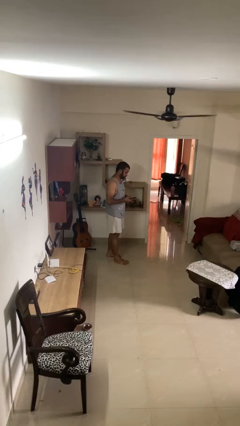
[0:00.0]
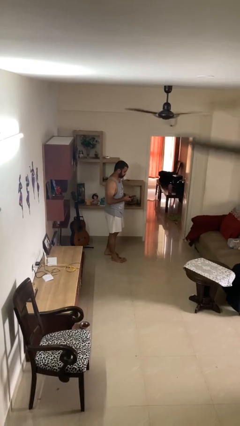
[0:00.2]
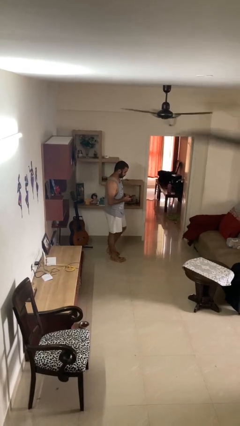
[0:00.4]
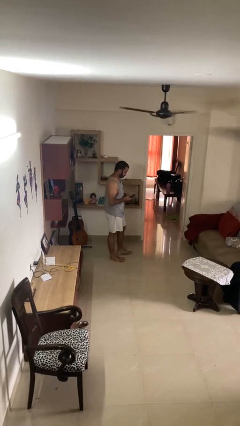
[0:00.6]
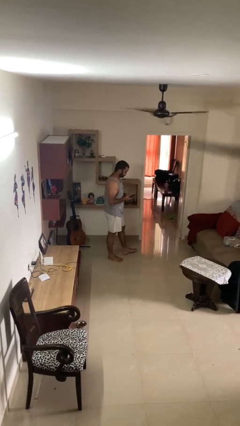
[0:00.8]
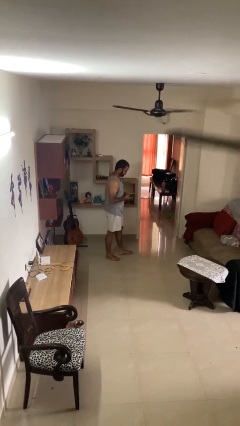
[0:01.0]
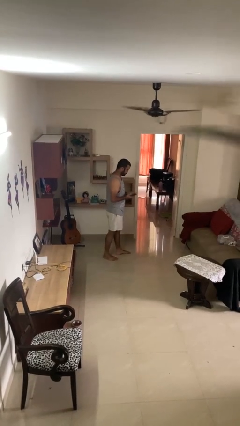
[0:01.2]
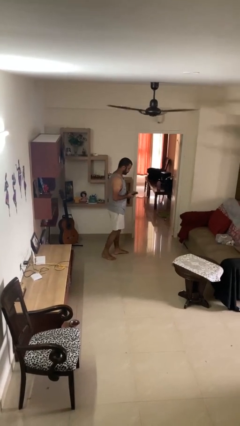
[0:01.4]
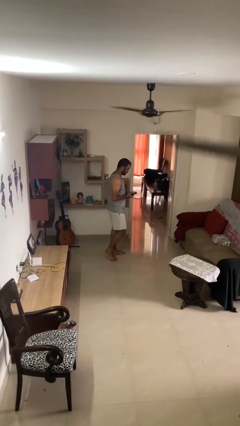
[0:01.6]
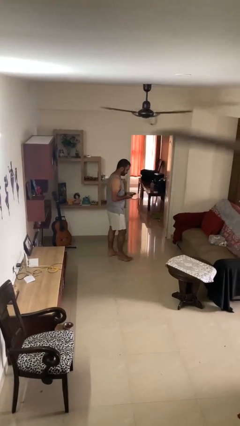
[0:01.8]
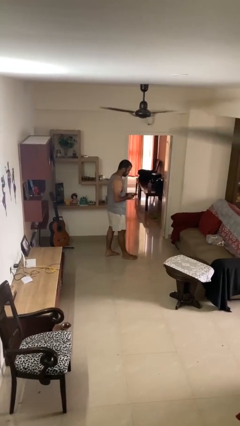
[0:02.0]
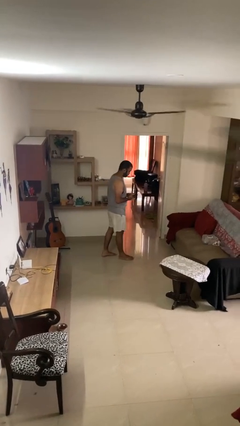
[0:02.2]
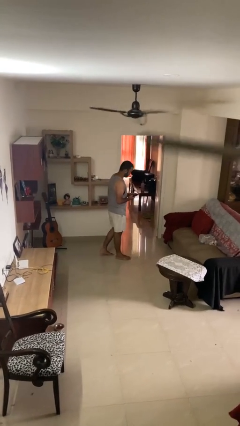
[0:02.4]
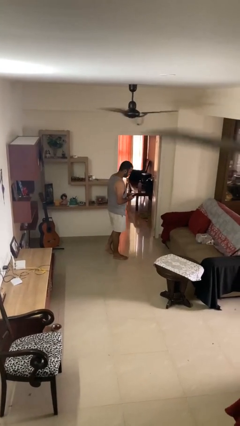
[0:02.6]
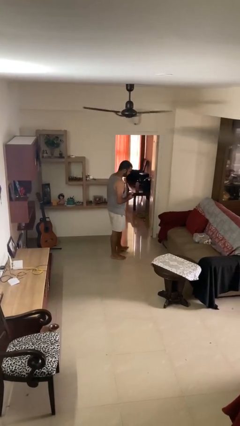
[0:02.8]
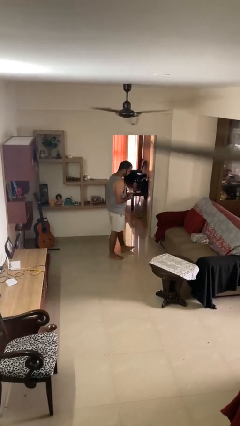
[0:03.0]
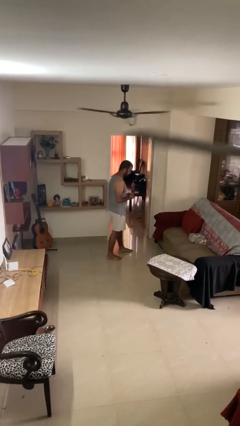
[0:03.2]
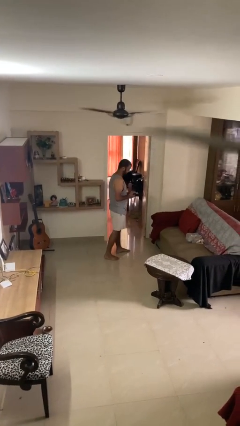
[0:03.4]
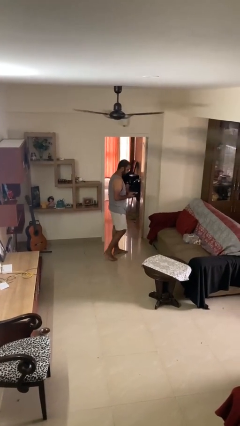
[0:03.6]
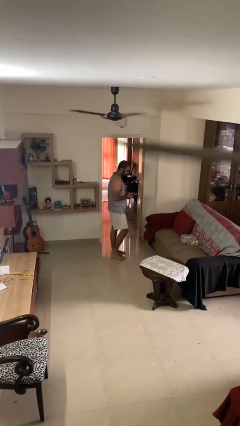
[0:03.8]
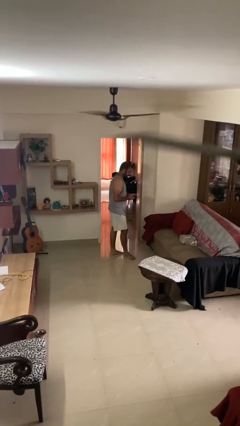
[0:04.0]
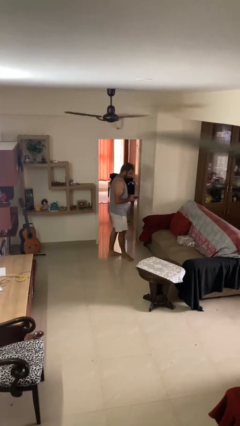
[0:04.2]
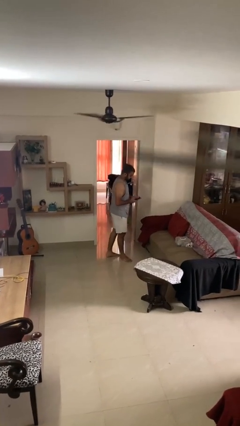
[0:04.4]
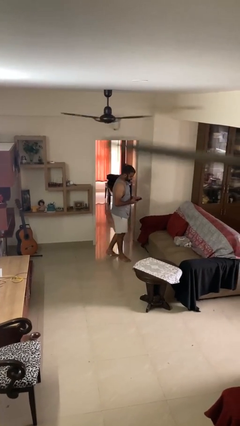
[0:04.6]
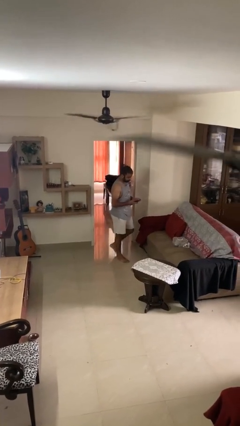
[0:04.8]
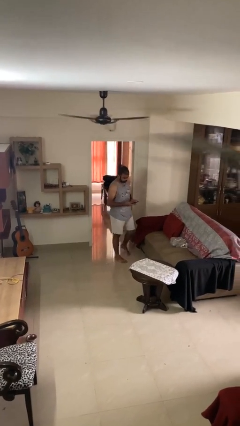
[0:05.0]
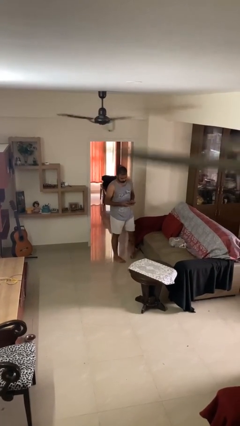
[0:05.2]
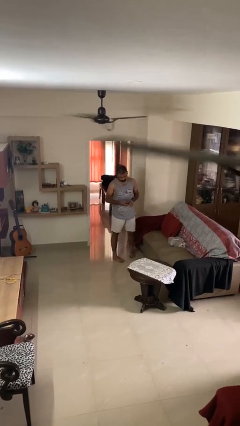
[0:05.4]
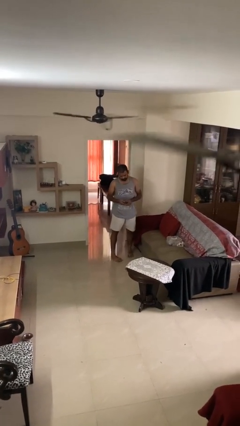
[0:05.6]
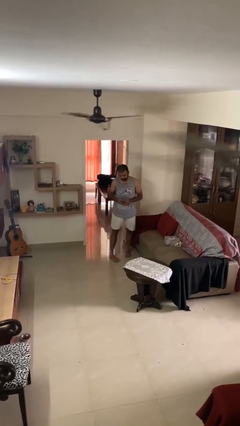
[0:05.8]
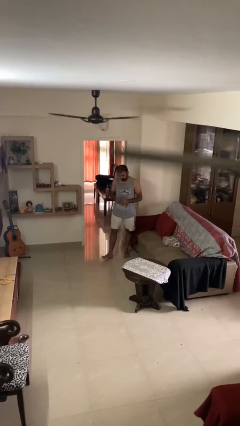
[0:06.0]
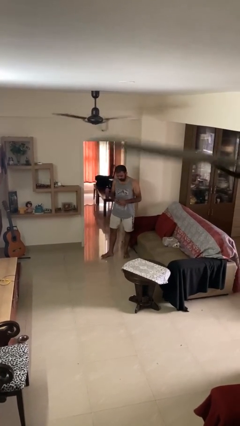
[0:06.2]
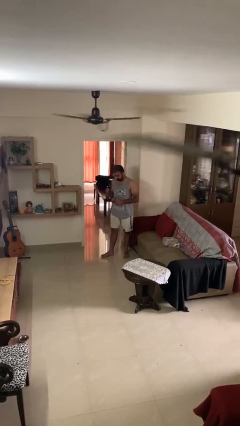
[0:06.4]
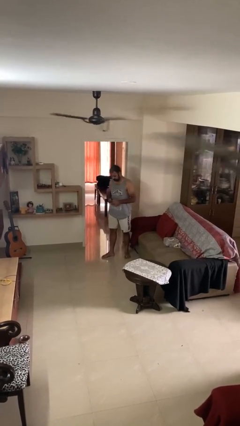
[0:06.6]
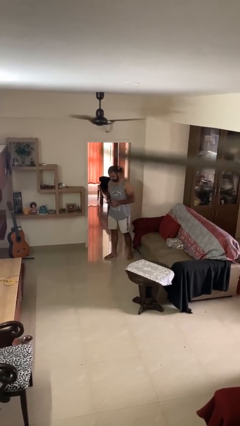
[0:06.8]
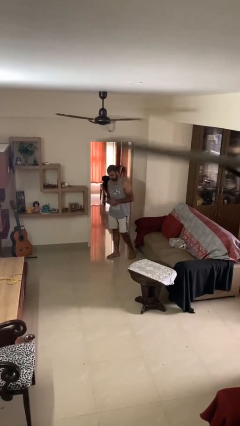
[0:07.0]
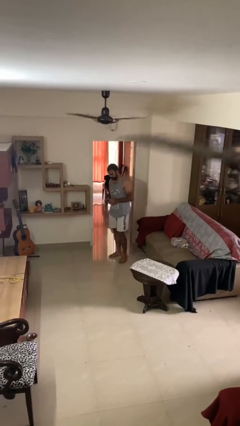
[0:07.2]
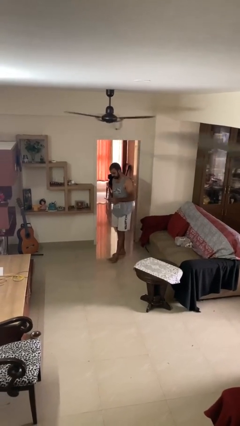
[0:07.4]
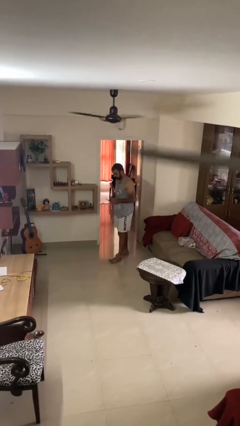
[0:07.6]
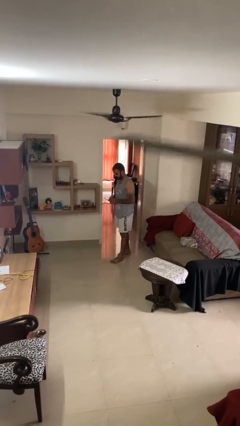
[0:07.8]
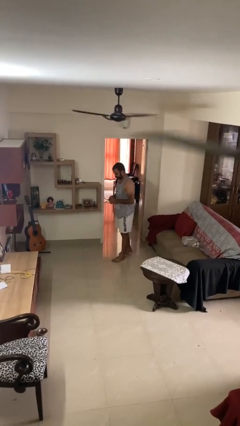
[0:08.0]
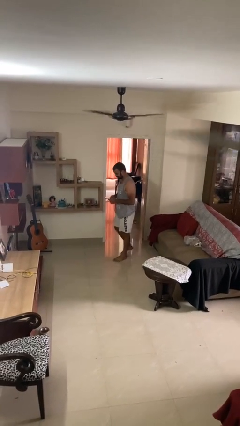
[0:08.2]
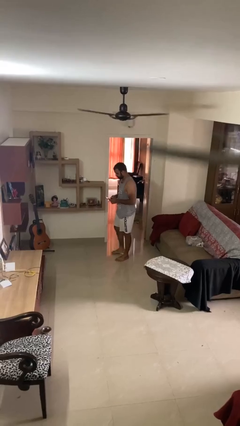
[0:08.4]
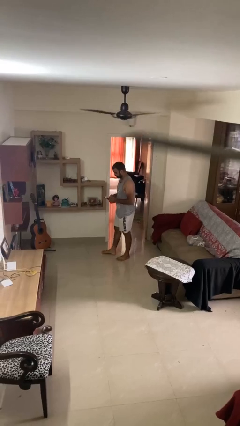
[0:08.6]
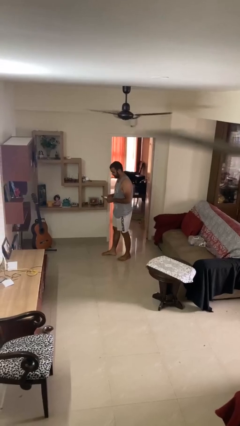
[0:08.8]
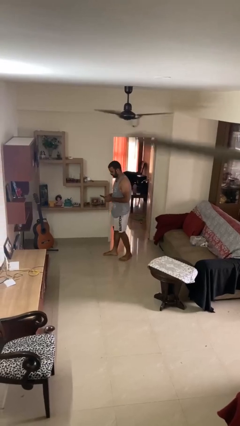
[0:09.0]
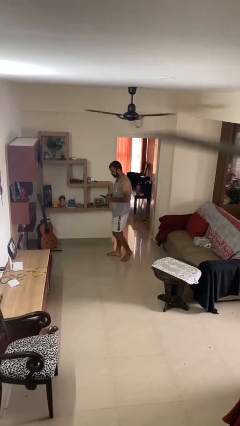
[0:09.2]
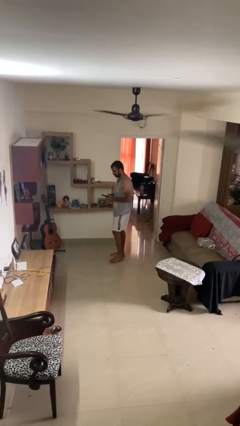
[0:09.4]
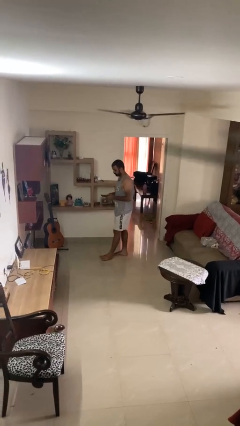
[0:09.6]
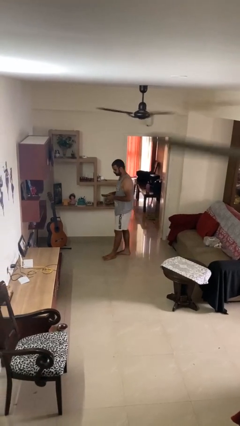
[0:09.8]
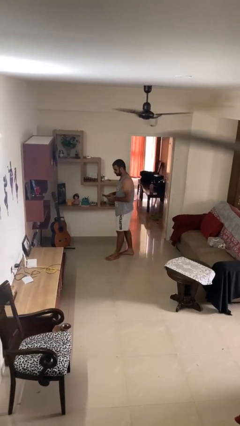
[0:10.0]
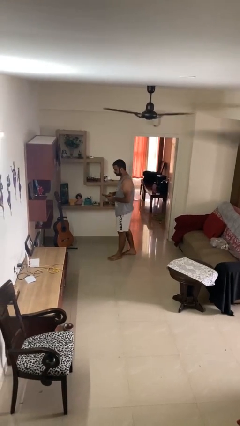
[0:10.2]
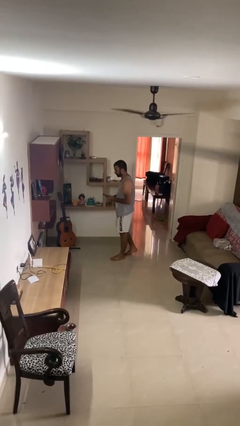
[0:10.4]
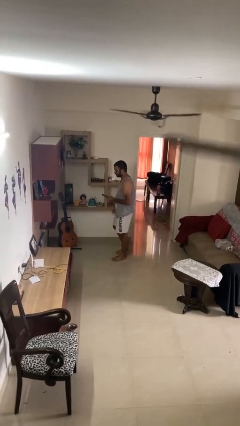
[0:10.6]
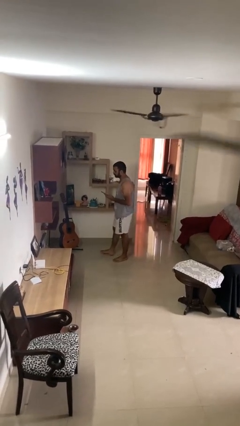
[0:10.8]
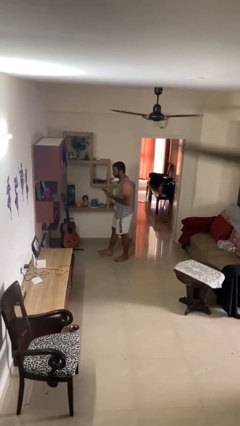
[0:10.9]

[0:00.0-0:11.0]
person texts on phone

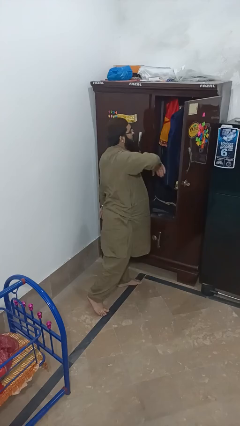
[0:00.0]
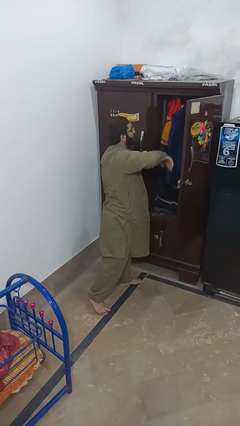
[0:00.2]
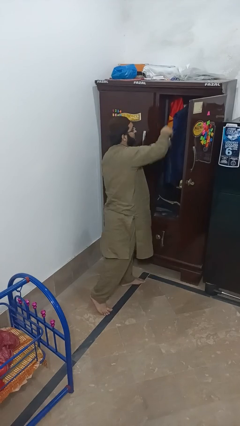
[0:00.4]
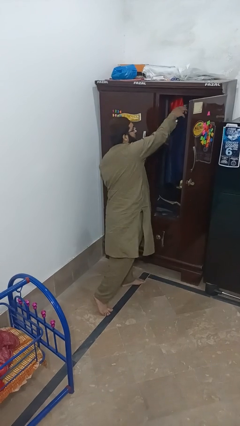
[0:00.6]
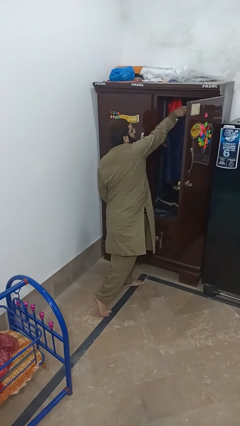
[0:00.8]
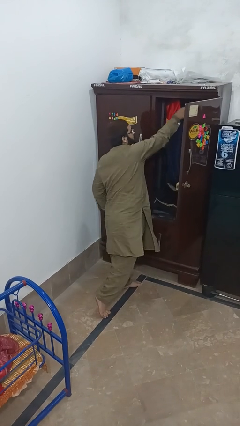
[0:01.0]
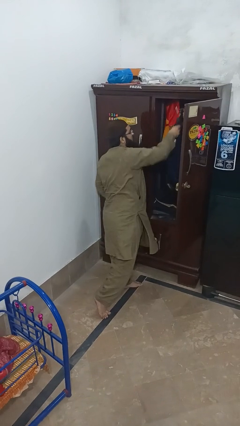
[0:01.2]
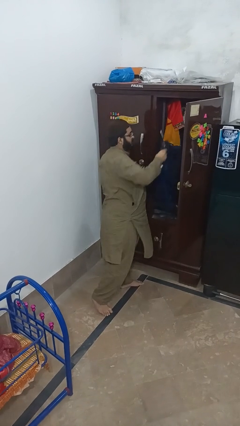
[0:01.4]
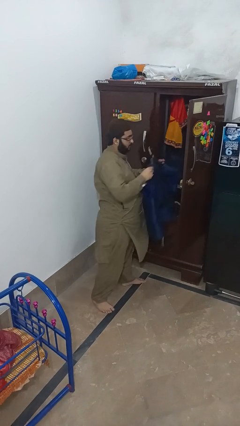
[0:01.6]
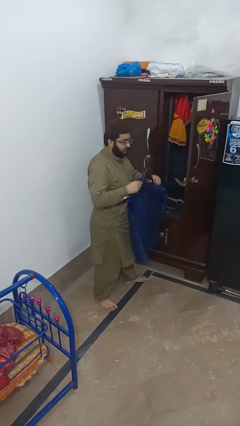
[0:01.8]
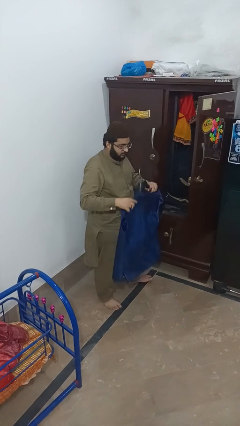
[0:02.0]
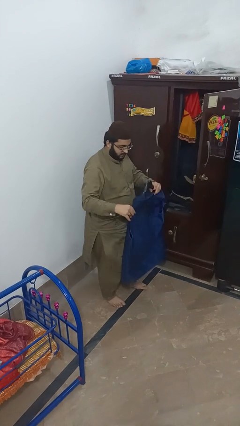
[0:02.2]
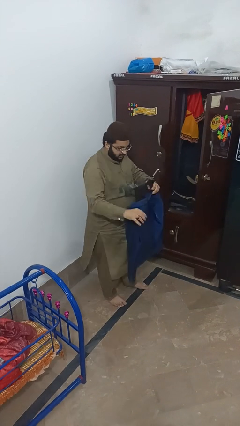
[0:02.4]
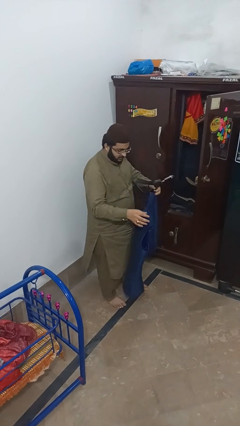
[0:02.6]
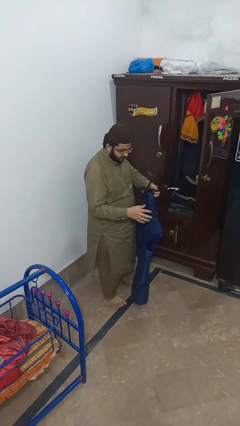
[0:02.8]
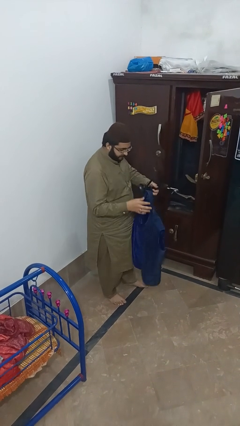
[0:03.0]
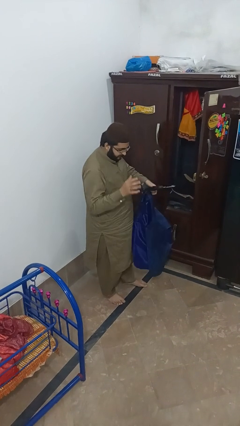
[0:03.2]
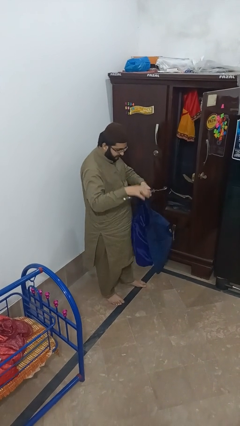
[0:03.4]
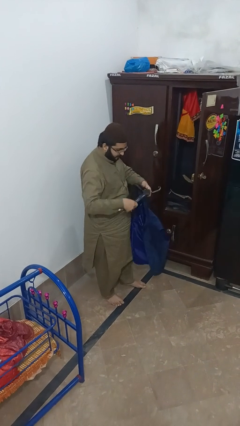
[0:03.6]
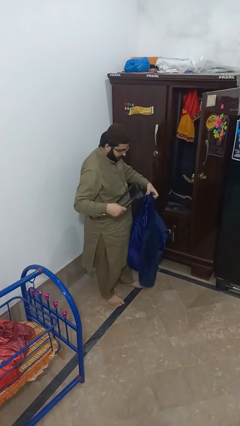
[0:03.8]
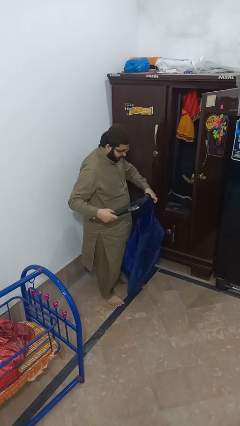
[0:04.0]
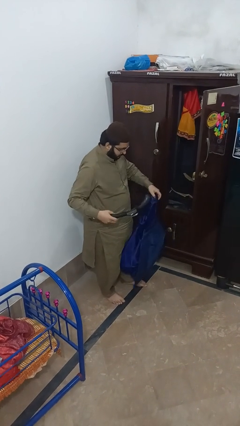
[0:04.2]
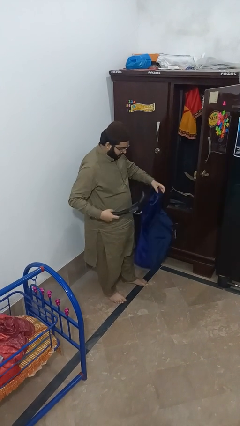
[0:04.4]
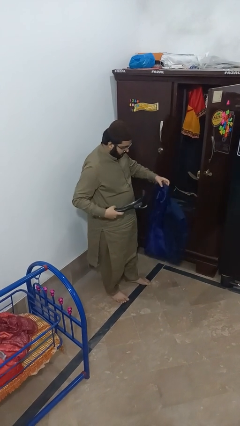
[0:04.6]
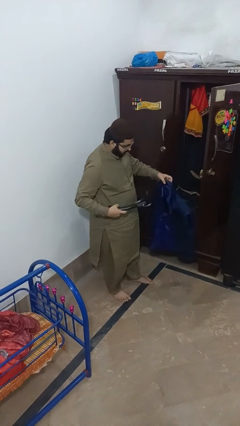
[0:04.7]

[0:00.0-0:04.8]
person takes clothes from closet

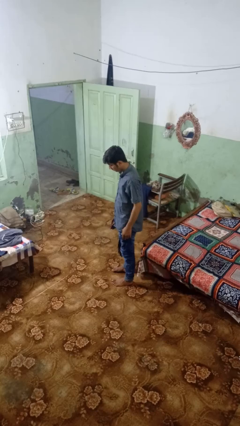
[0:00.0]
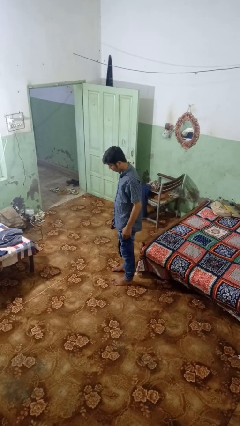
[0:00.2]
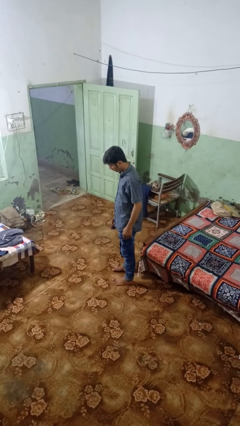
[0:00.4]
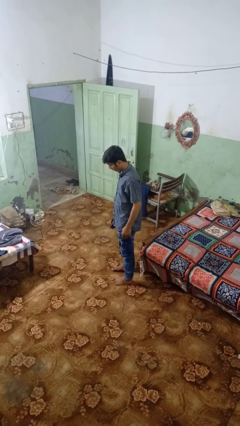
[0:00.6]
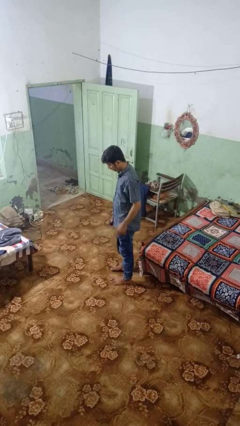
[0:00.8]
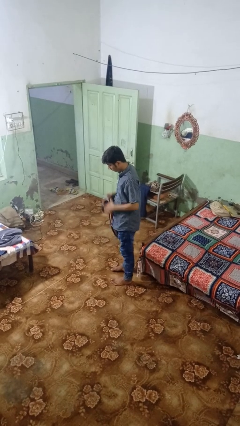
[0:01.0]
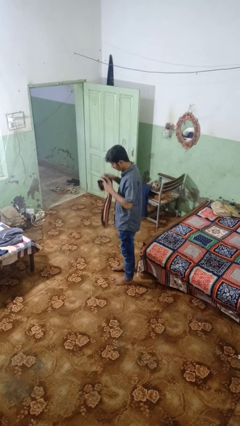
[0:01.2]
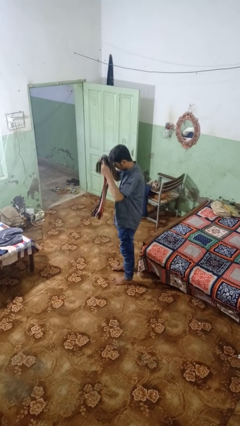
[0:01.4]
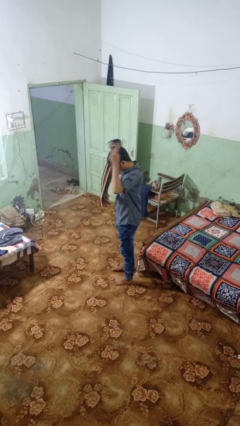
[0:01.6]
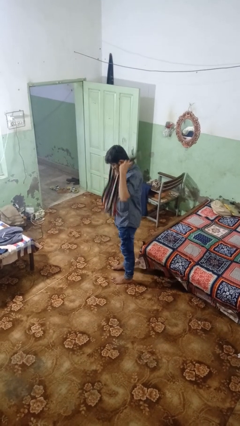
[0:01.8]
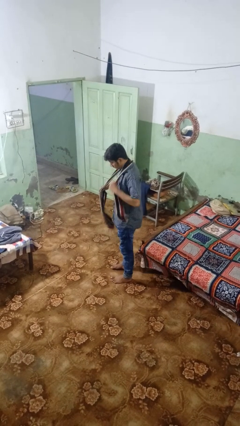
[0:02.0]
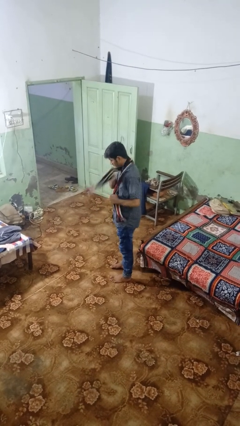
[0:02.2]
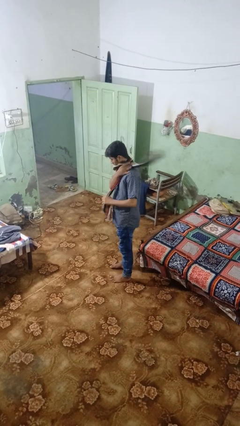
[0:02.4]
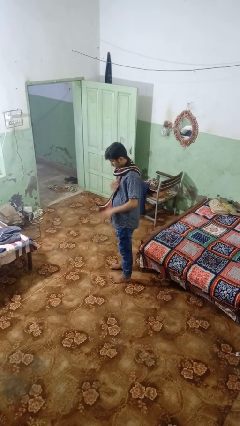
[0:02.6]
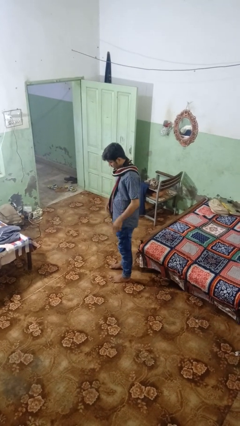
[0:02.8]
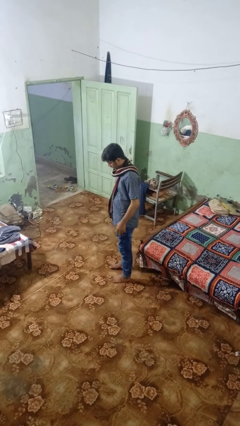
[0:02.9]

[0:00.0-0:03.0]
person puts on scarf
